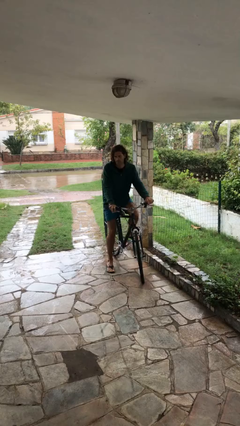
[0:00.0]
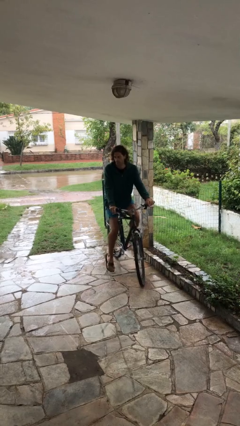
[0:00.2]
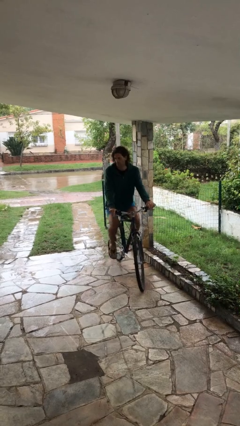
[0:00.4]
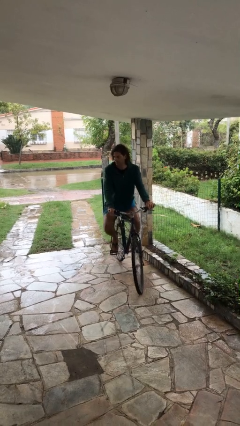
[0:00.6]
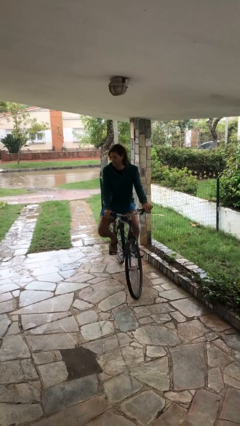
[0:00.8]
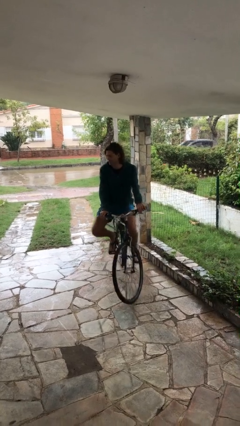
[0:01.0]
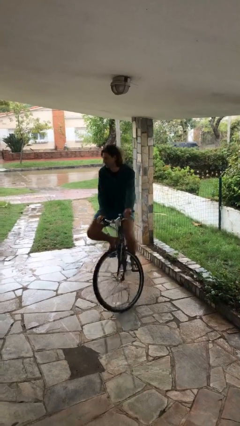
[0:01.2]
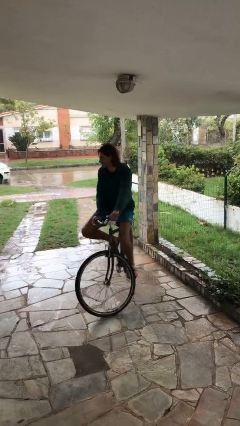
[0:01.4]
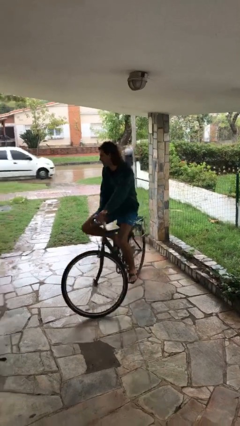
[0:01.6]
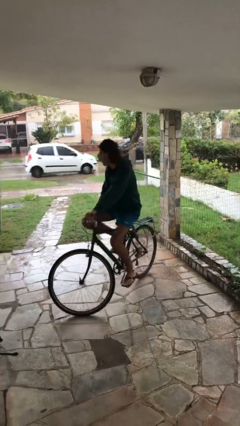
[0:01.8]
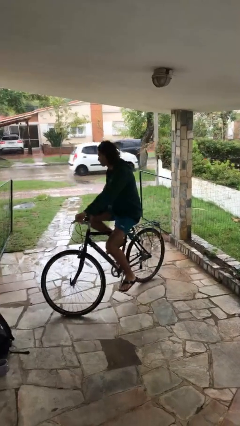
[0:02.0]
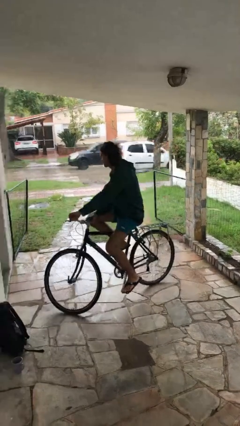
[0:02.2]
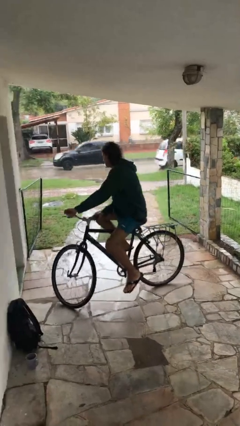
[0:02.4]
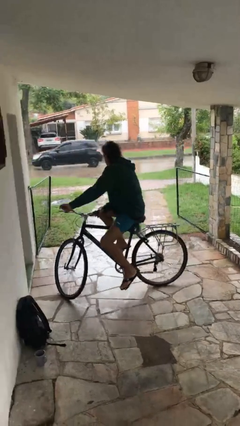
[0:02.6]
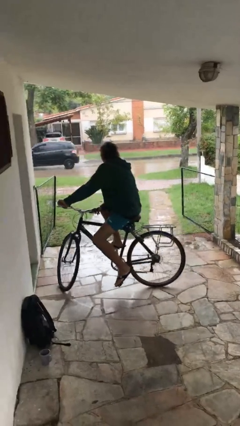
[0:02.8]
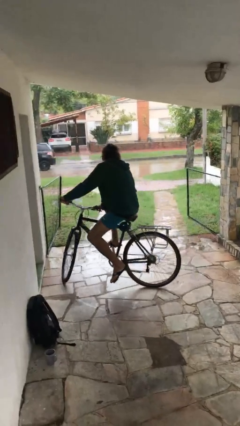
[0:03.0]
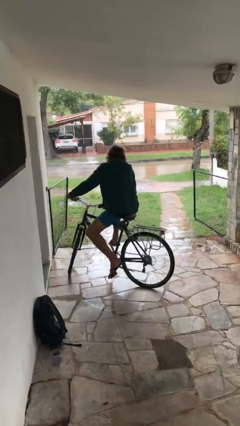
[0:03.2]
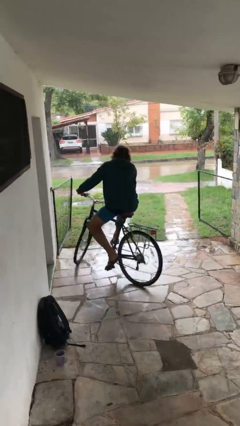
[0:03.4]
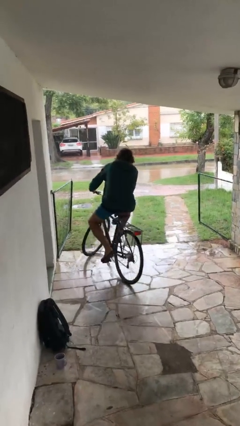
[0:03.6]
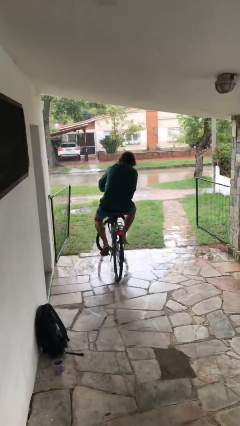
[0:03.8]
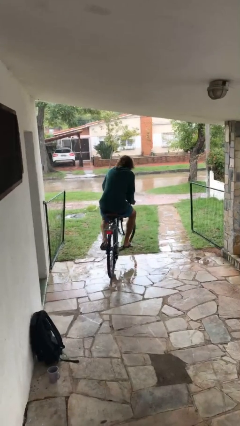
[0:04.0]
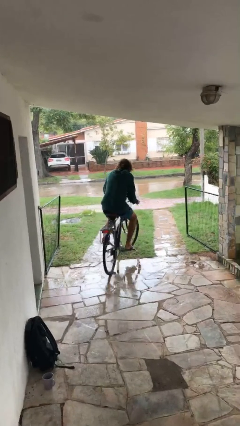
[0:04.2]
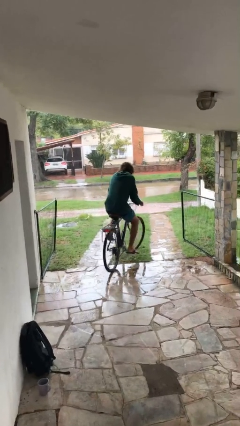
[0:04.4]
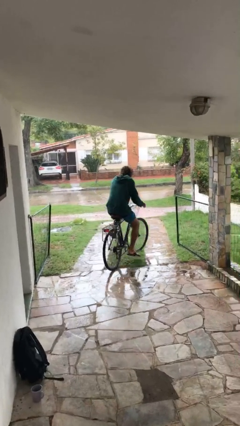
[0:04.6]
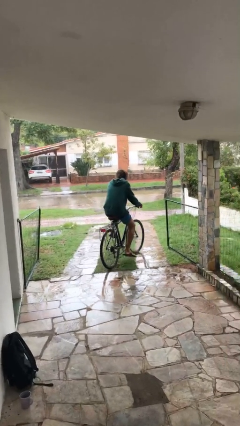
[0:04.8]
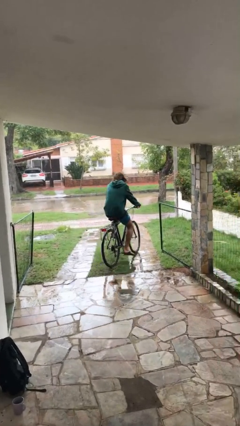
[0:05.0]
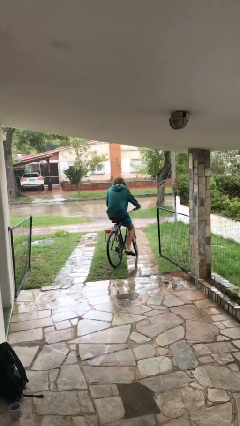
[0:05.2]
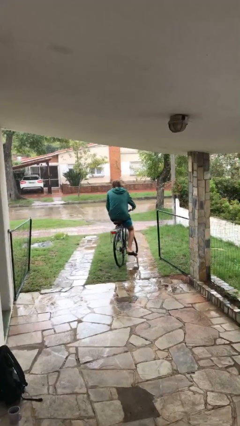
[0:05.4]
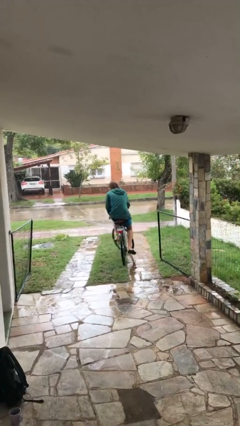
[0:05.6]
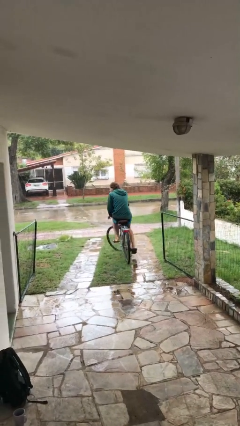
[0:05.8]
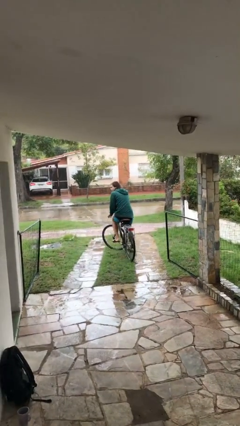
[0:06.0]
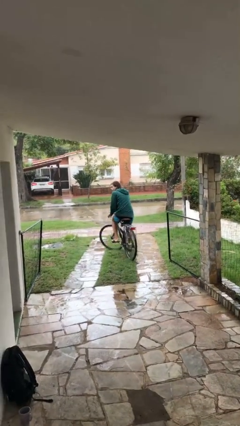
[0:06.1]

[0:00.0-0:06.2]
person rides bicycle

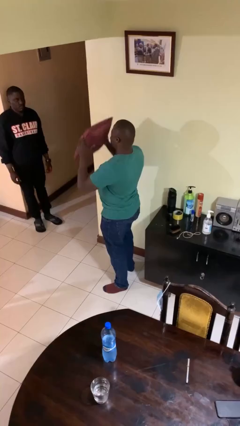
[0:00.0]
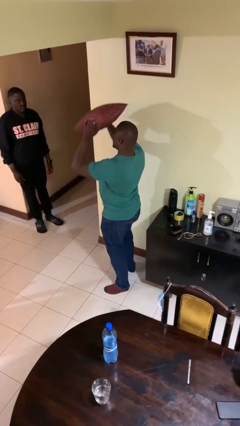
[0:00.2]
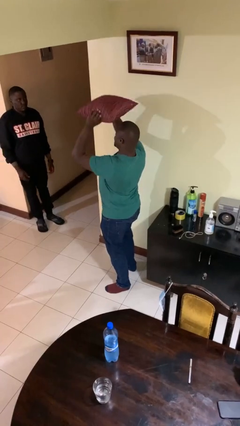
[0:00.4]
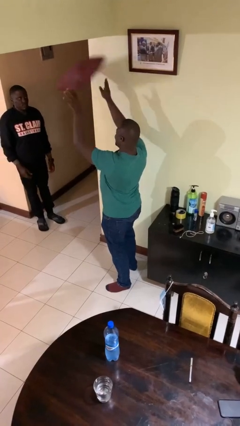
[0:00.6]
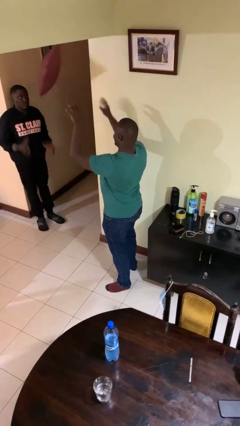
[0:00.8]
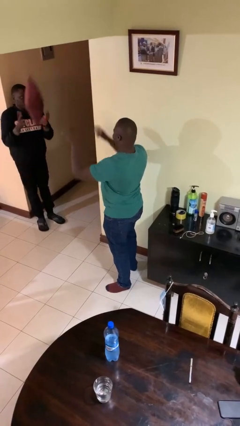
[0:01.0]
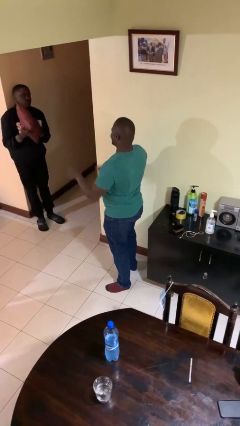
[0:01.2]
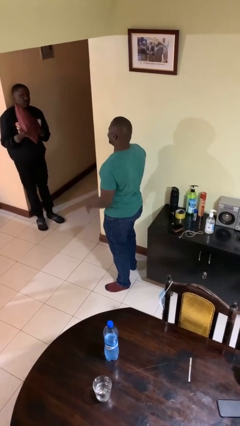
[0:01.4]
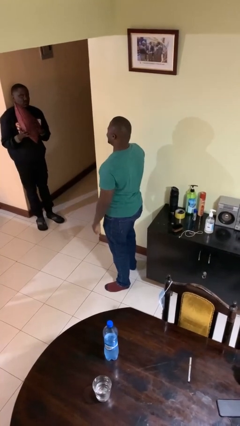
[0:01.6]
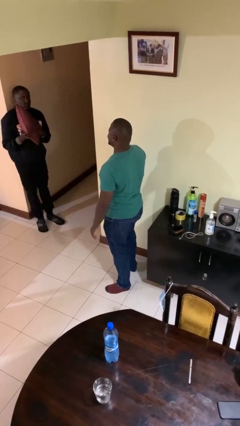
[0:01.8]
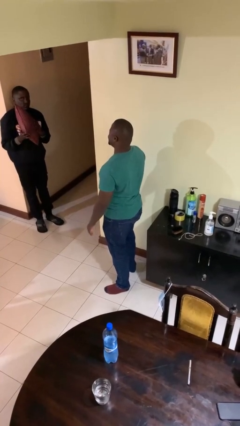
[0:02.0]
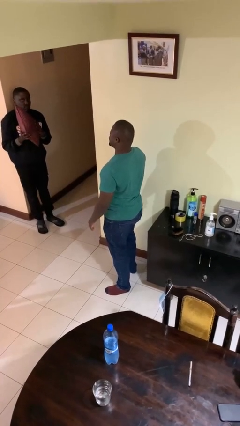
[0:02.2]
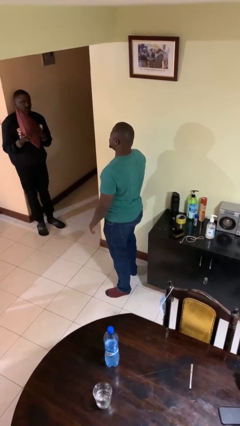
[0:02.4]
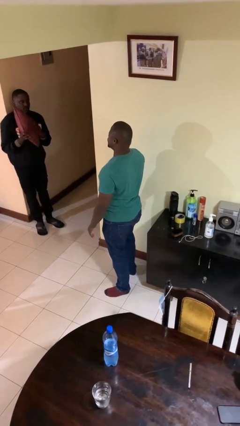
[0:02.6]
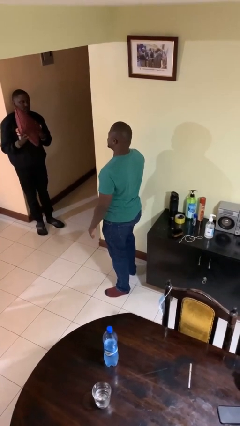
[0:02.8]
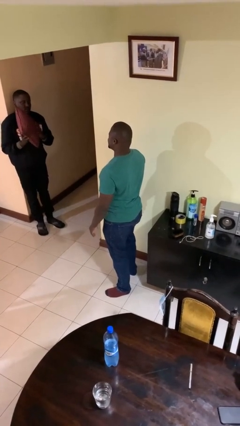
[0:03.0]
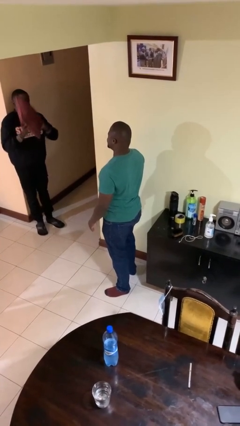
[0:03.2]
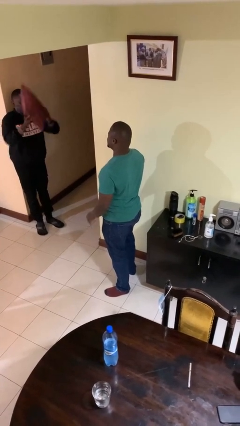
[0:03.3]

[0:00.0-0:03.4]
person throws object to person

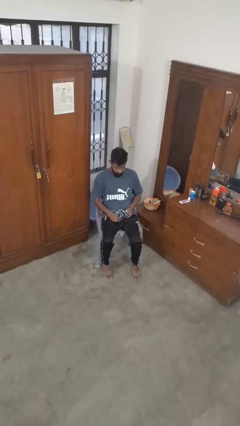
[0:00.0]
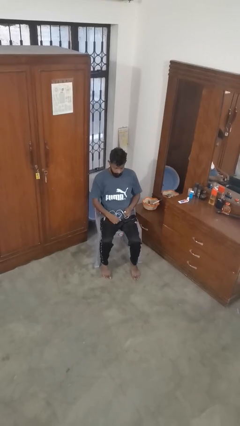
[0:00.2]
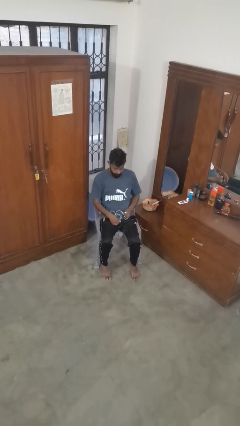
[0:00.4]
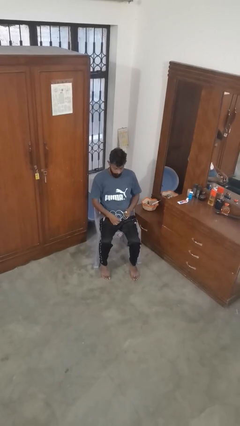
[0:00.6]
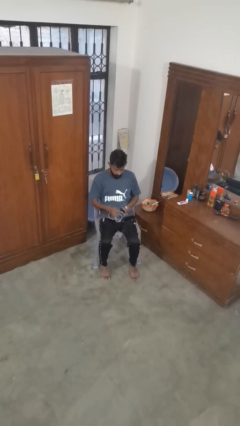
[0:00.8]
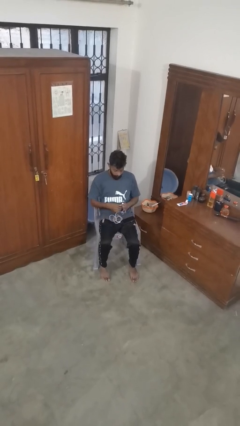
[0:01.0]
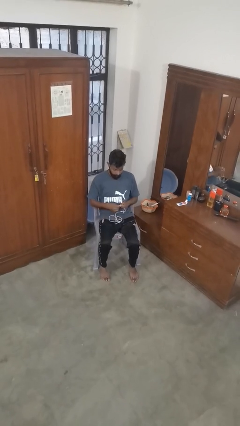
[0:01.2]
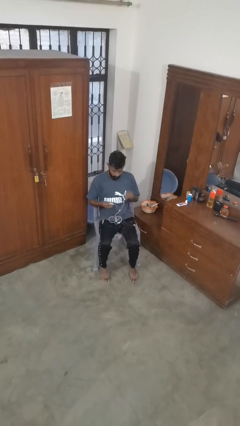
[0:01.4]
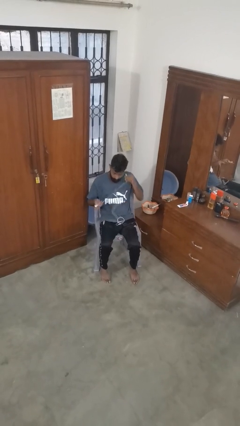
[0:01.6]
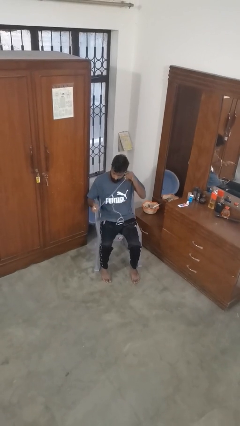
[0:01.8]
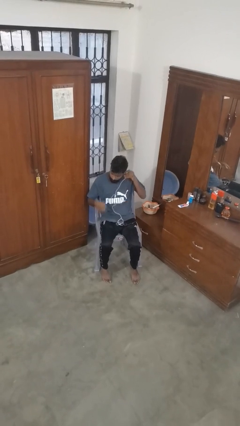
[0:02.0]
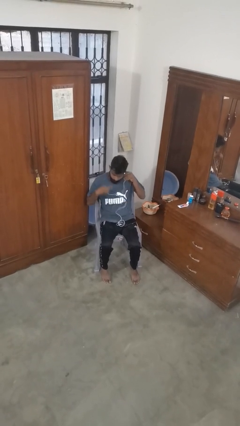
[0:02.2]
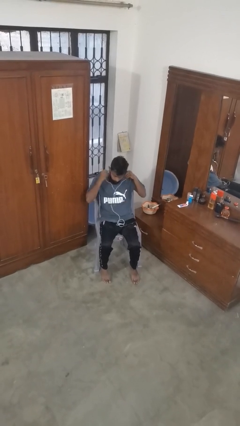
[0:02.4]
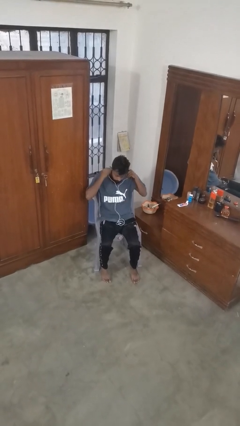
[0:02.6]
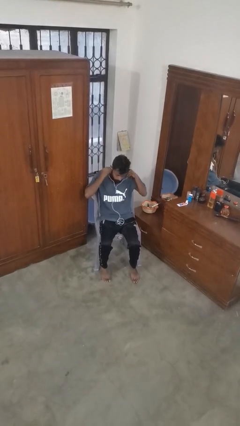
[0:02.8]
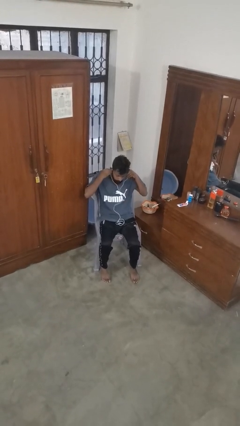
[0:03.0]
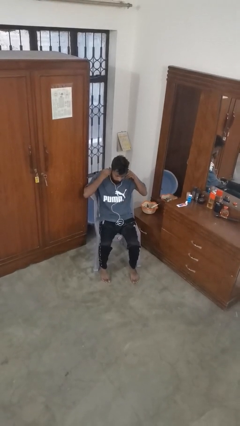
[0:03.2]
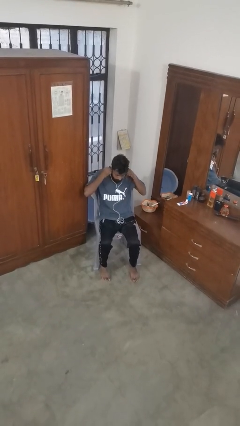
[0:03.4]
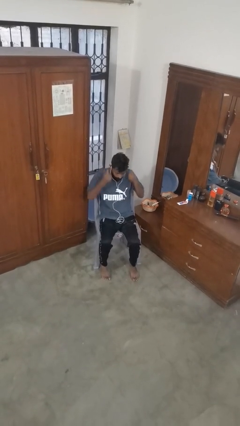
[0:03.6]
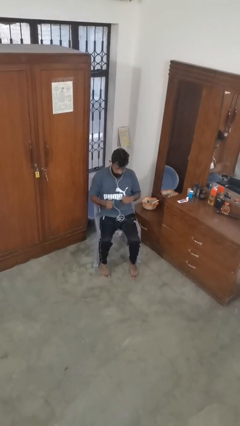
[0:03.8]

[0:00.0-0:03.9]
person puts on headphones

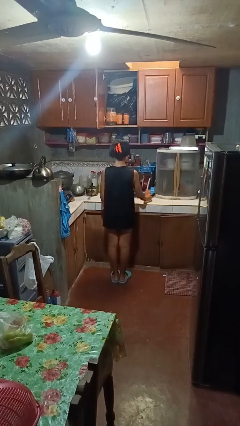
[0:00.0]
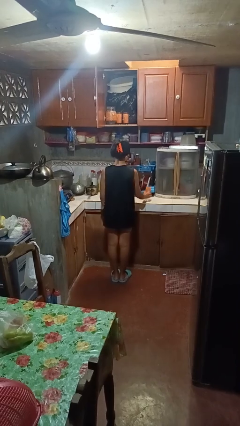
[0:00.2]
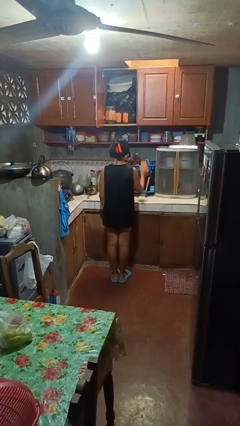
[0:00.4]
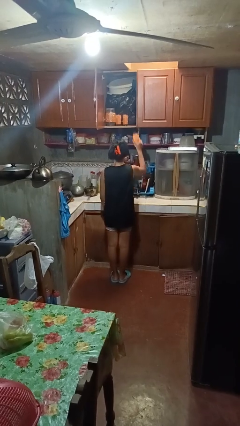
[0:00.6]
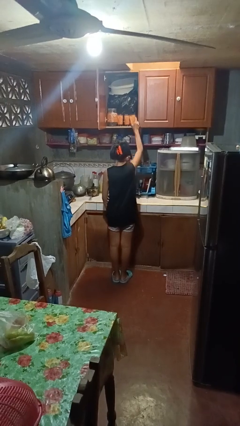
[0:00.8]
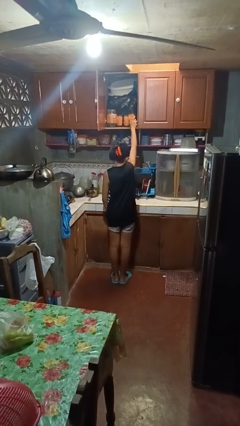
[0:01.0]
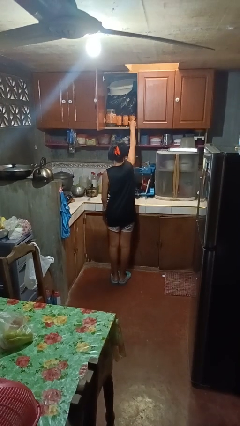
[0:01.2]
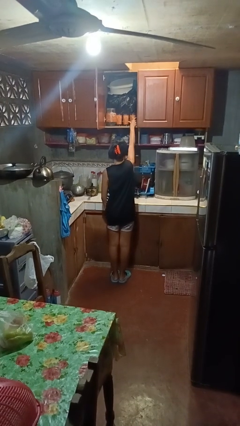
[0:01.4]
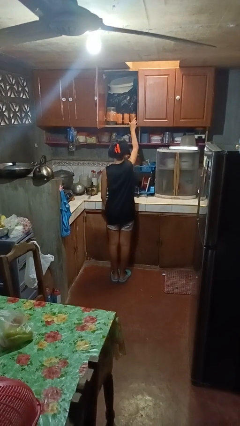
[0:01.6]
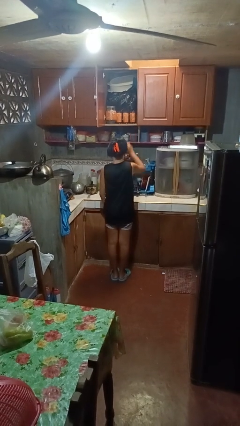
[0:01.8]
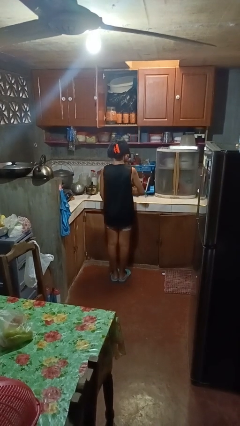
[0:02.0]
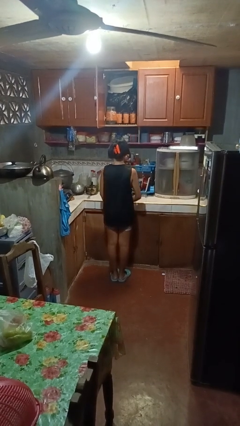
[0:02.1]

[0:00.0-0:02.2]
person puts object in cabinet

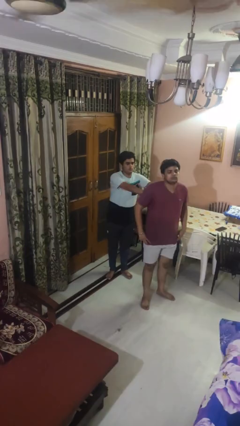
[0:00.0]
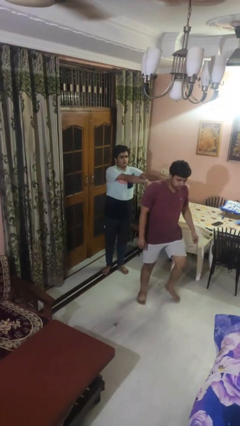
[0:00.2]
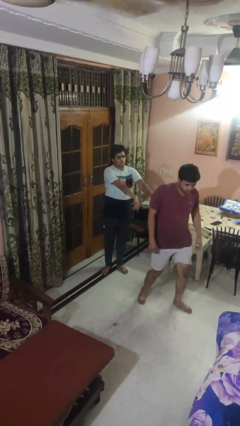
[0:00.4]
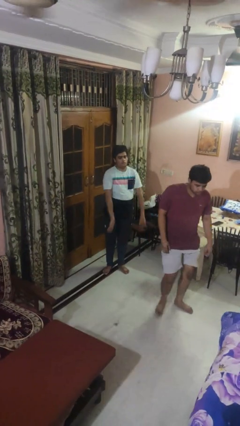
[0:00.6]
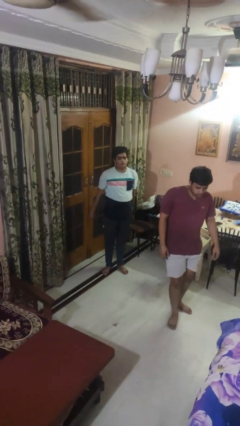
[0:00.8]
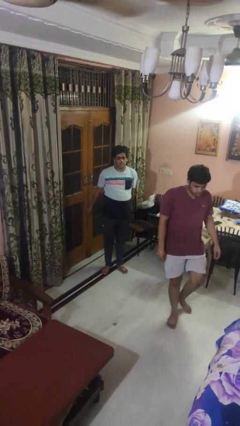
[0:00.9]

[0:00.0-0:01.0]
person shoves person

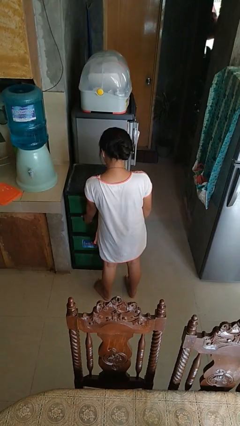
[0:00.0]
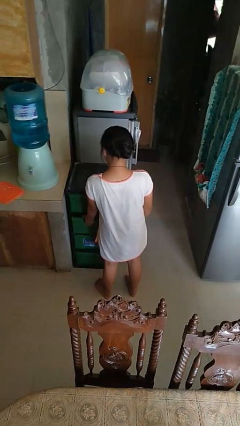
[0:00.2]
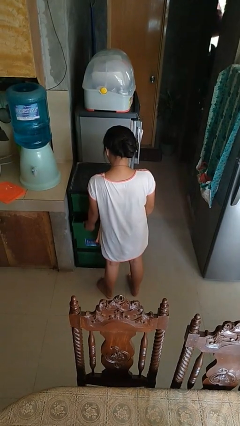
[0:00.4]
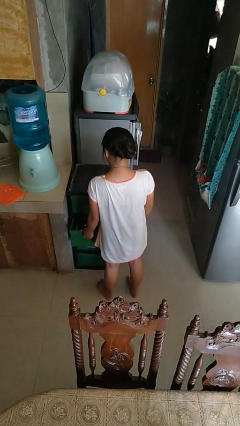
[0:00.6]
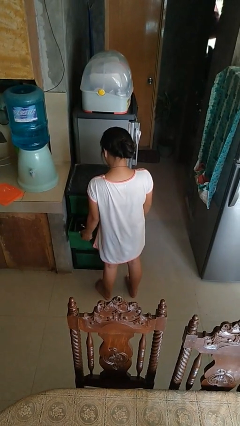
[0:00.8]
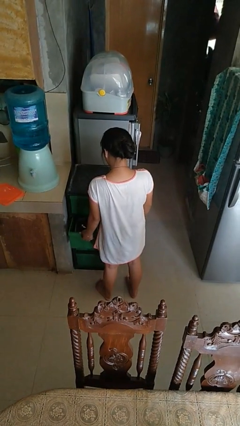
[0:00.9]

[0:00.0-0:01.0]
person opens kitchen drawer
